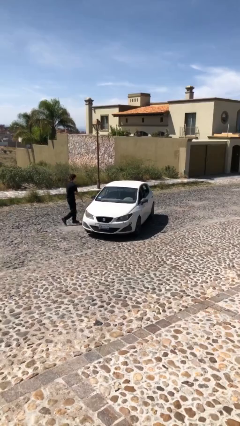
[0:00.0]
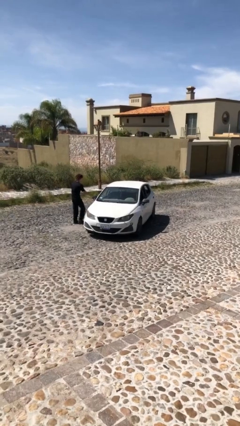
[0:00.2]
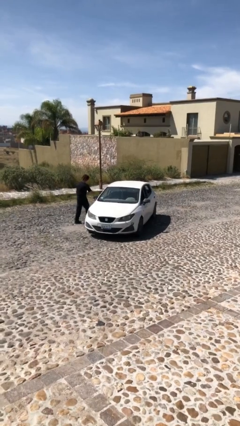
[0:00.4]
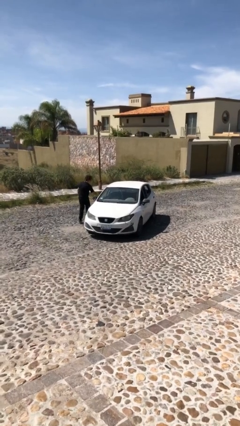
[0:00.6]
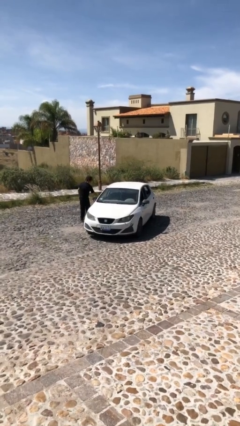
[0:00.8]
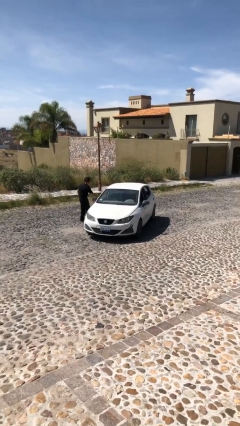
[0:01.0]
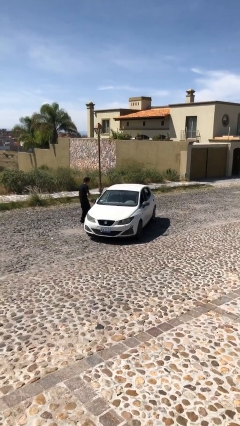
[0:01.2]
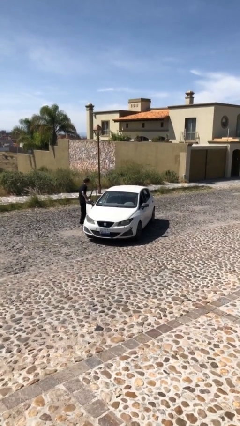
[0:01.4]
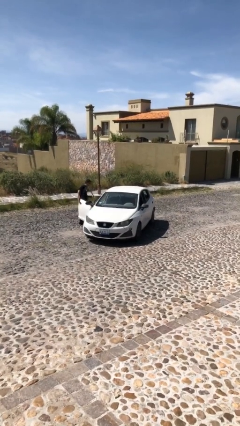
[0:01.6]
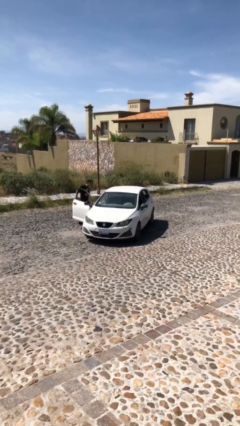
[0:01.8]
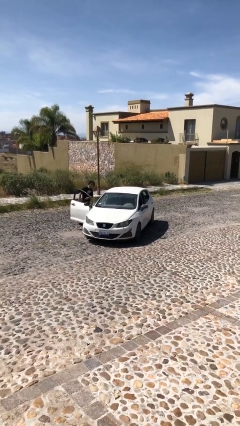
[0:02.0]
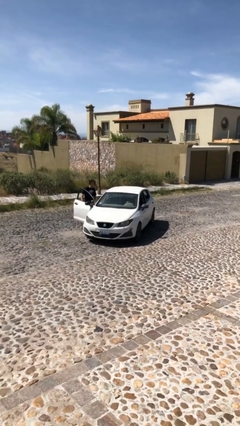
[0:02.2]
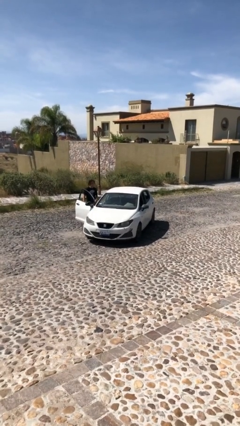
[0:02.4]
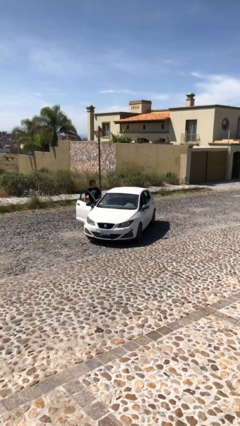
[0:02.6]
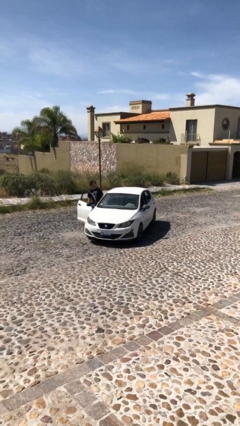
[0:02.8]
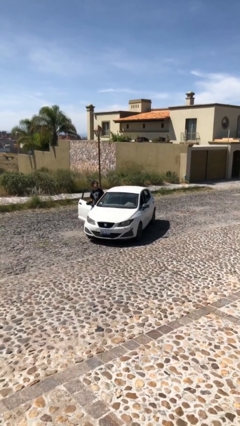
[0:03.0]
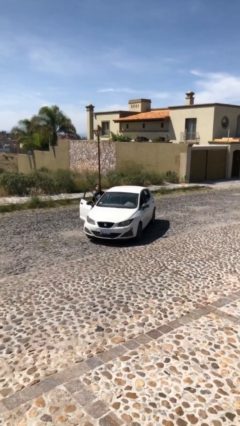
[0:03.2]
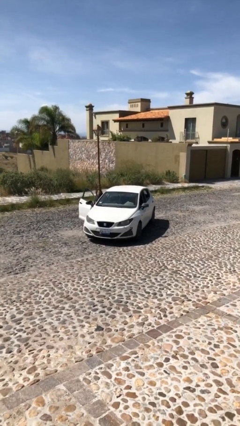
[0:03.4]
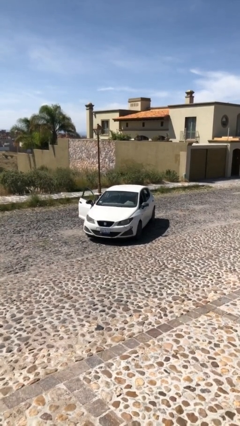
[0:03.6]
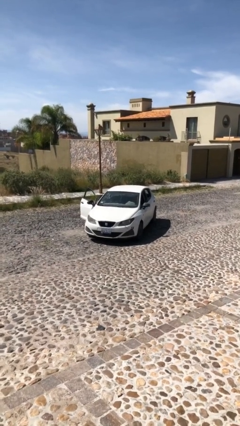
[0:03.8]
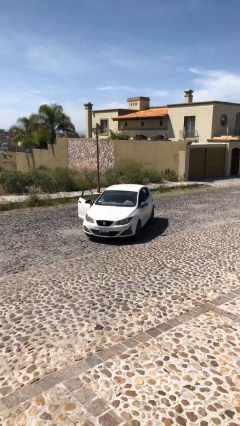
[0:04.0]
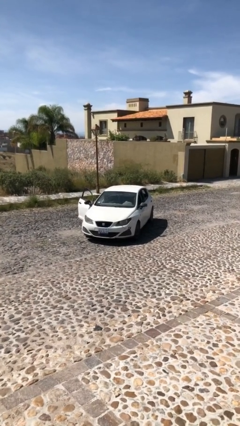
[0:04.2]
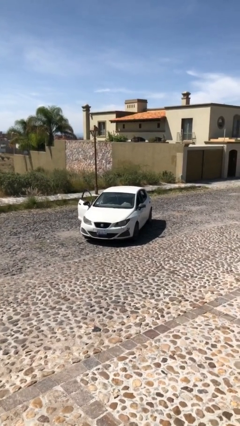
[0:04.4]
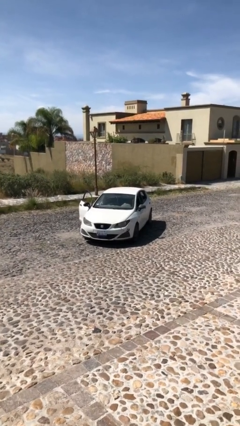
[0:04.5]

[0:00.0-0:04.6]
car picks up person

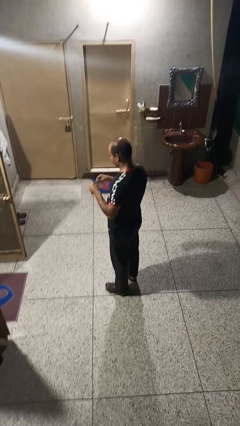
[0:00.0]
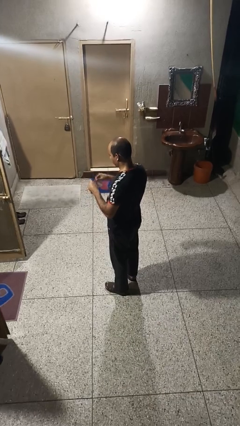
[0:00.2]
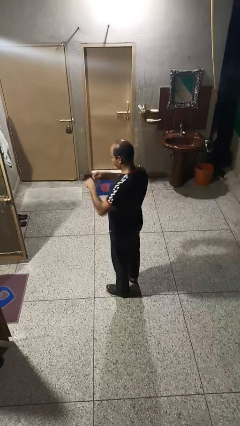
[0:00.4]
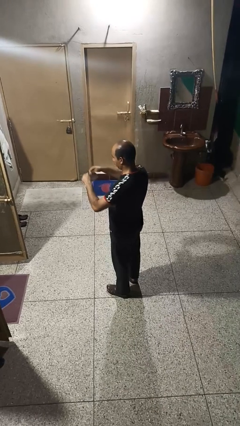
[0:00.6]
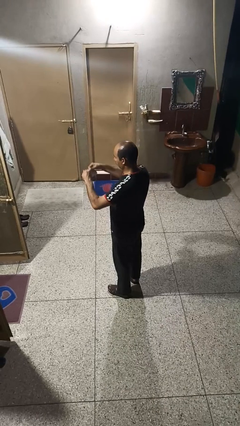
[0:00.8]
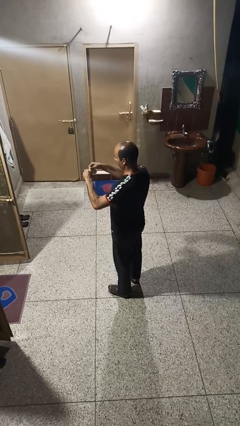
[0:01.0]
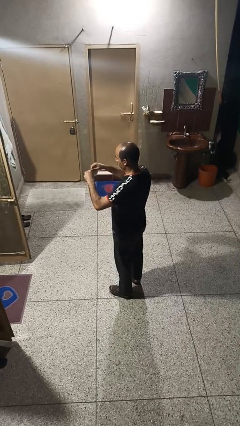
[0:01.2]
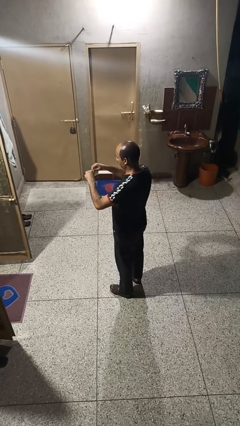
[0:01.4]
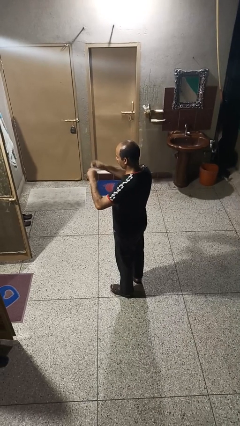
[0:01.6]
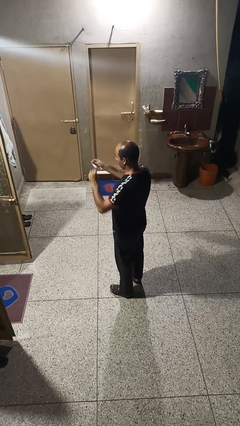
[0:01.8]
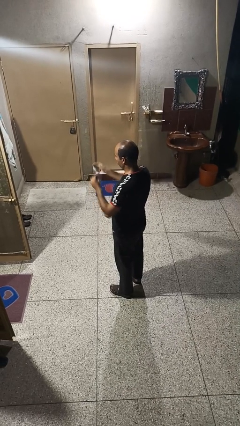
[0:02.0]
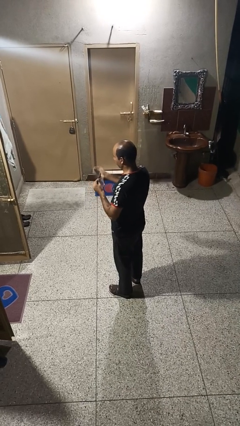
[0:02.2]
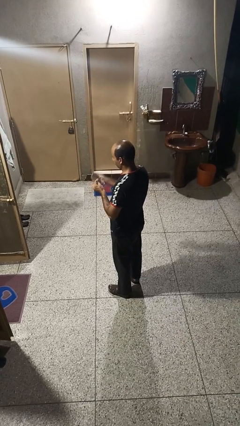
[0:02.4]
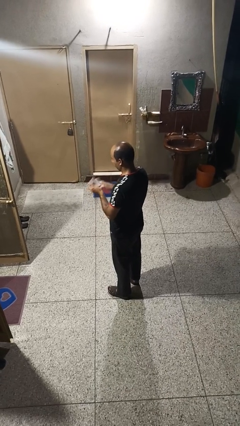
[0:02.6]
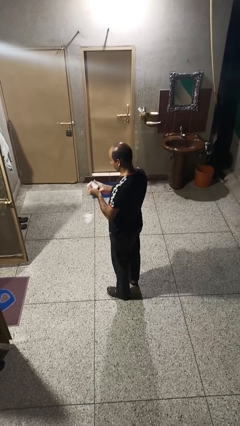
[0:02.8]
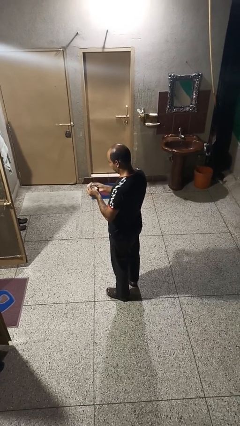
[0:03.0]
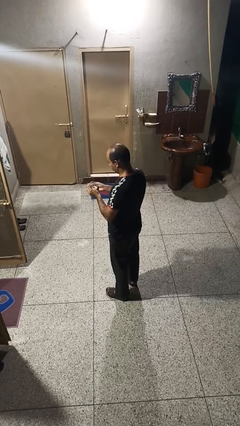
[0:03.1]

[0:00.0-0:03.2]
person tears paper

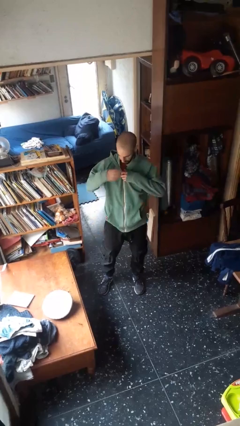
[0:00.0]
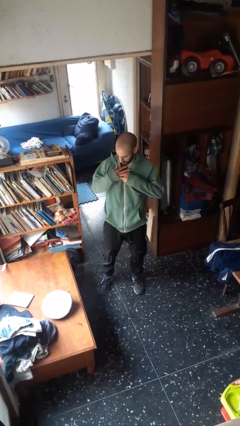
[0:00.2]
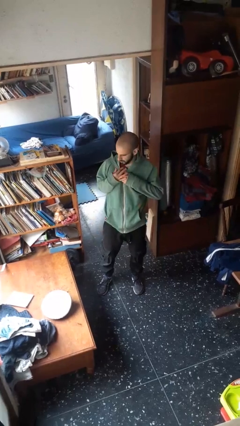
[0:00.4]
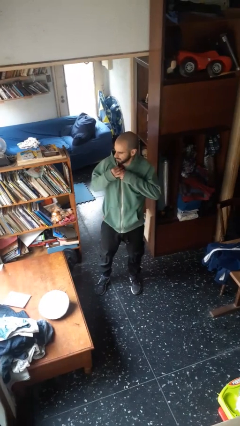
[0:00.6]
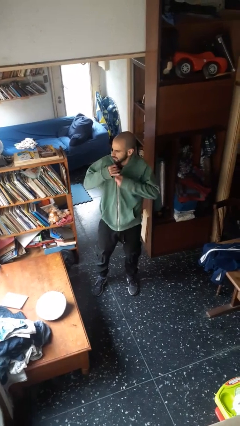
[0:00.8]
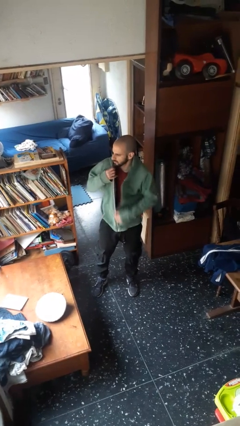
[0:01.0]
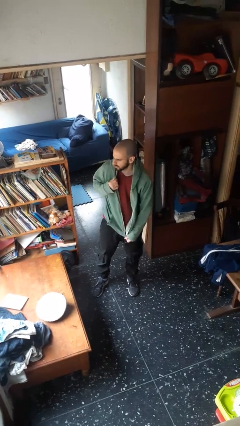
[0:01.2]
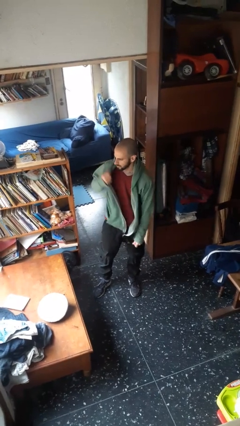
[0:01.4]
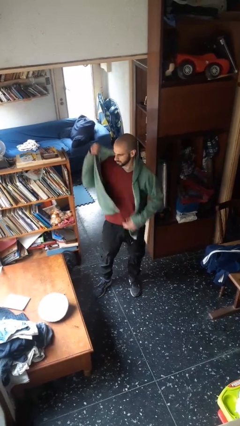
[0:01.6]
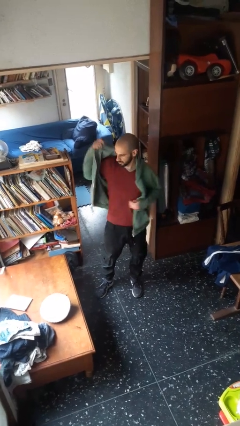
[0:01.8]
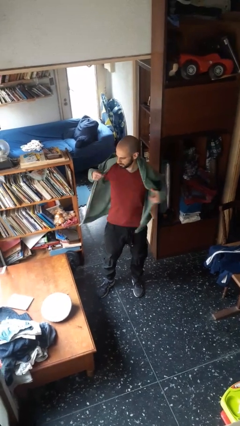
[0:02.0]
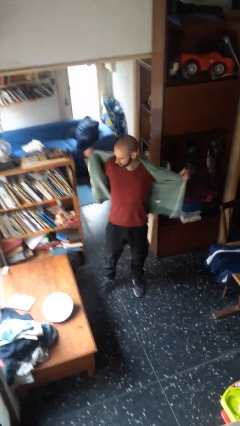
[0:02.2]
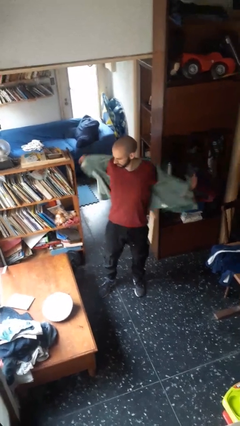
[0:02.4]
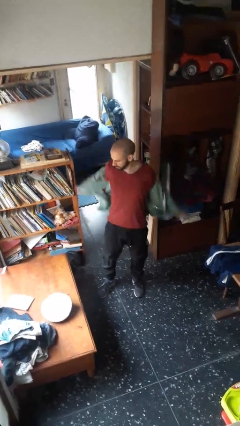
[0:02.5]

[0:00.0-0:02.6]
person unzips jacket

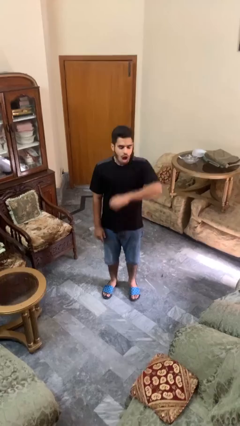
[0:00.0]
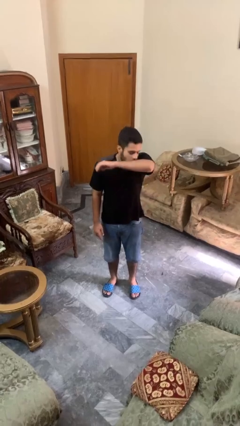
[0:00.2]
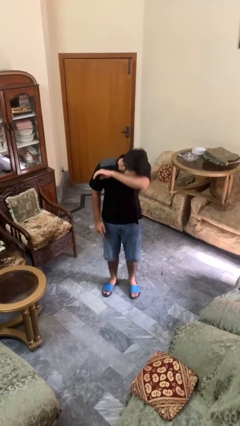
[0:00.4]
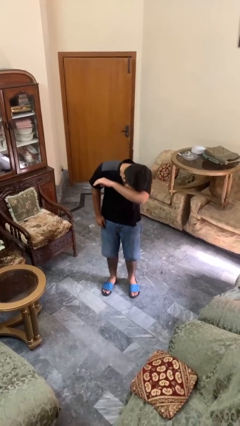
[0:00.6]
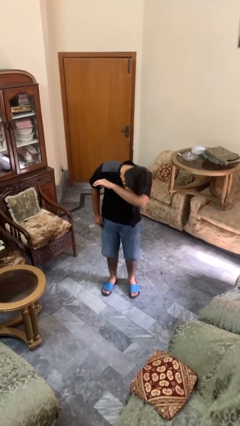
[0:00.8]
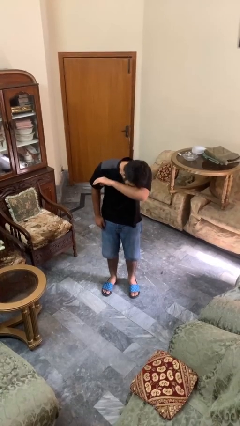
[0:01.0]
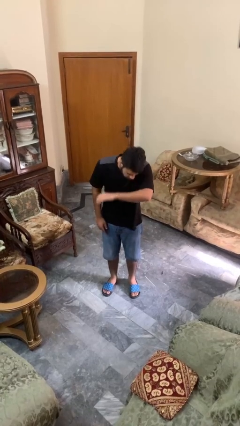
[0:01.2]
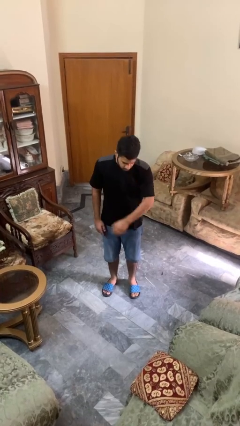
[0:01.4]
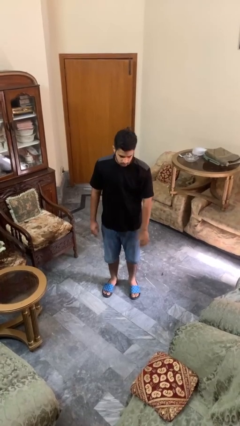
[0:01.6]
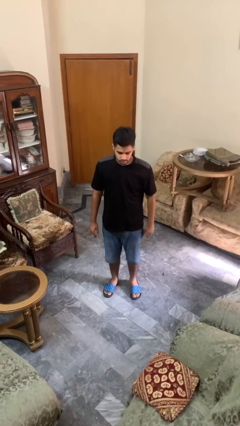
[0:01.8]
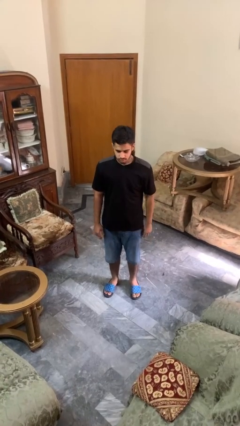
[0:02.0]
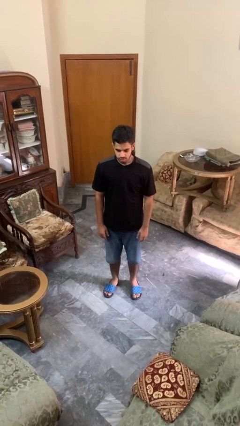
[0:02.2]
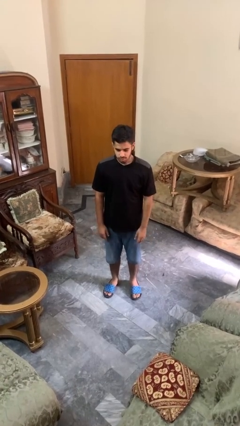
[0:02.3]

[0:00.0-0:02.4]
person sneezes into arm

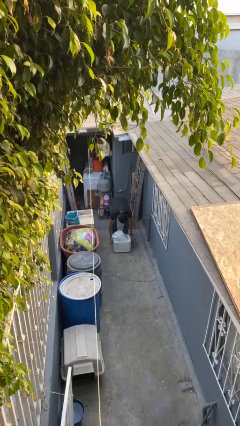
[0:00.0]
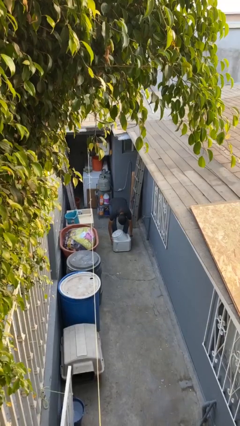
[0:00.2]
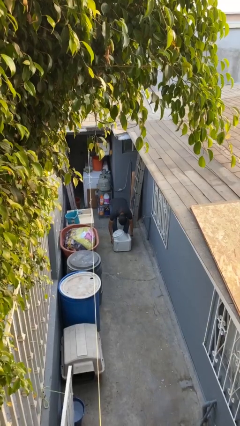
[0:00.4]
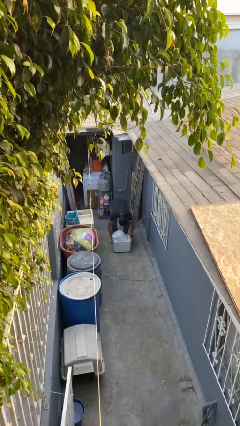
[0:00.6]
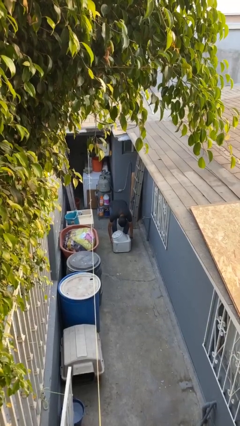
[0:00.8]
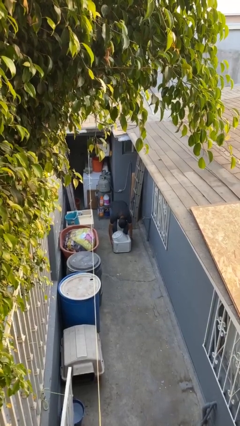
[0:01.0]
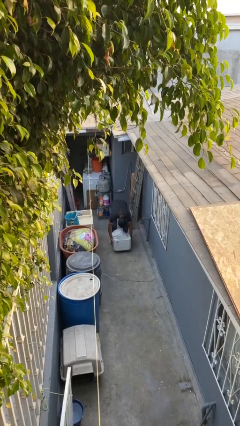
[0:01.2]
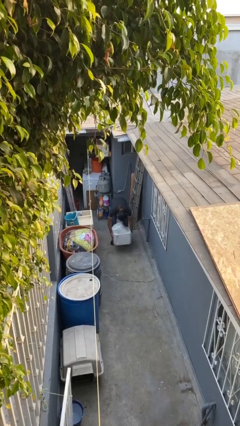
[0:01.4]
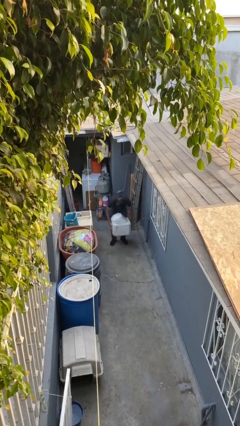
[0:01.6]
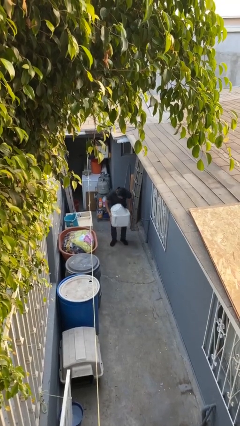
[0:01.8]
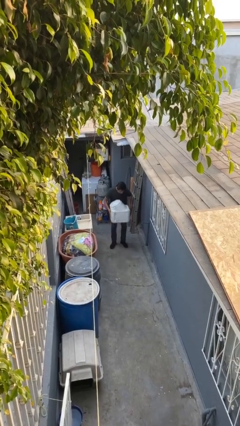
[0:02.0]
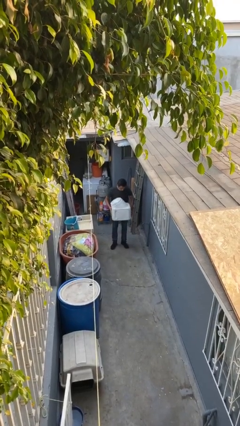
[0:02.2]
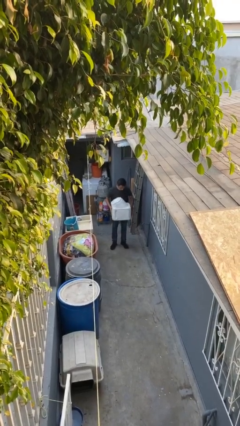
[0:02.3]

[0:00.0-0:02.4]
person picks up object from floor

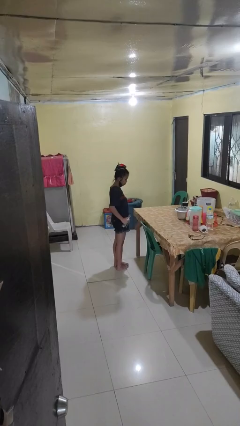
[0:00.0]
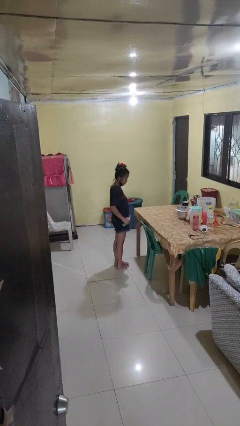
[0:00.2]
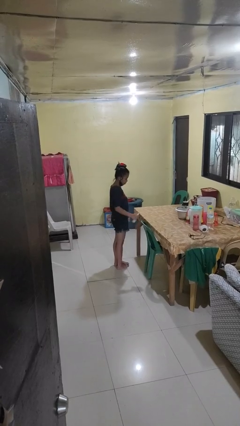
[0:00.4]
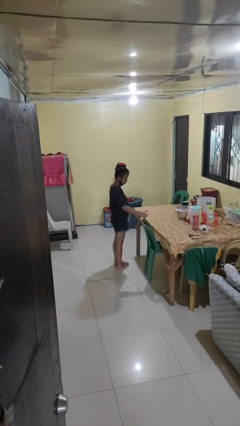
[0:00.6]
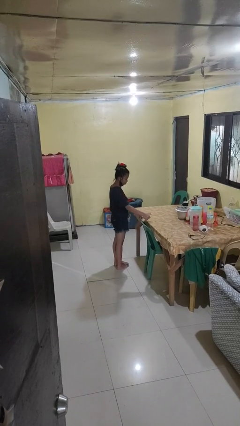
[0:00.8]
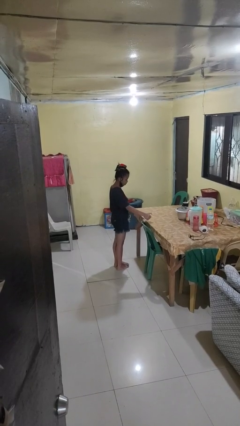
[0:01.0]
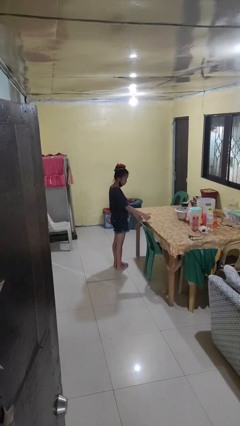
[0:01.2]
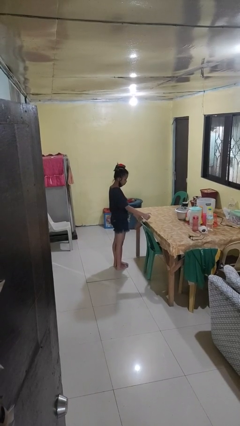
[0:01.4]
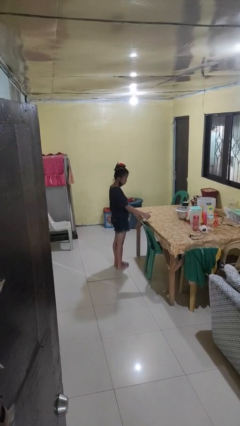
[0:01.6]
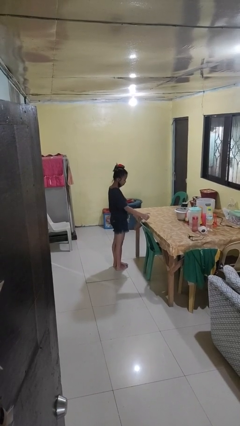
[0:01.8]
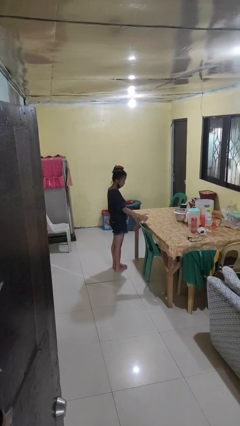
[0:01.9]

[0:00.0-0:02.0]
person sprays from bottle

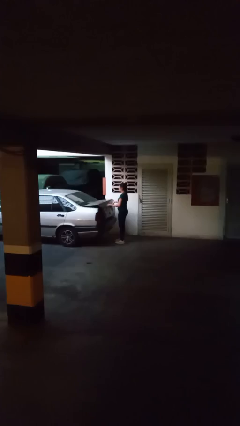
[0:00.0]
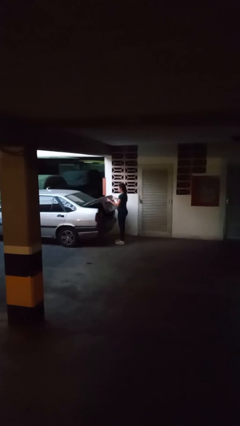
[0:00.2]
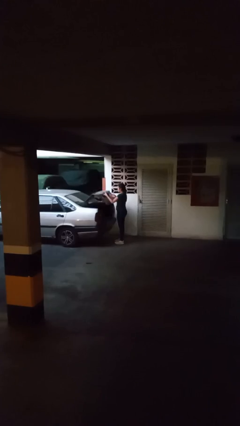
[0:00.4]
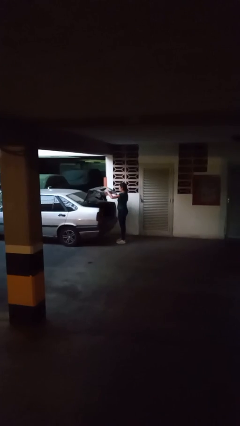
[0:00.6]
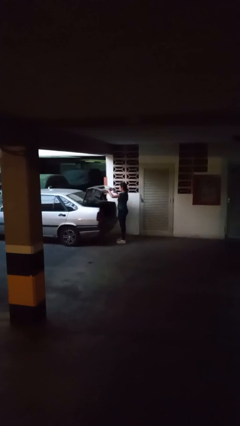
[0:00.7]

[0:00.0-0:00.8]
person opens car trunk
